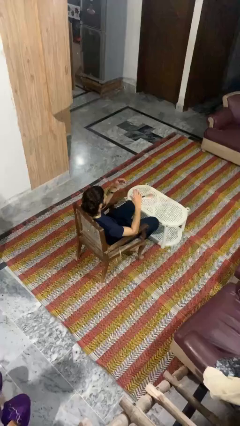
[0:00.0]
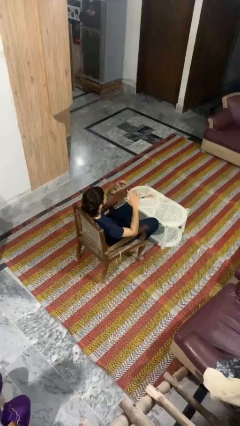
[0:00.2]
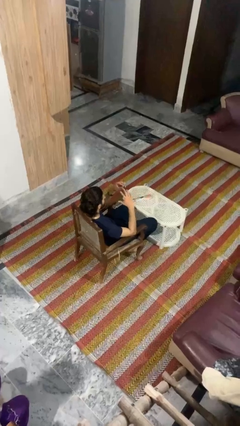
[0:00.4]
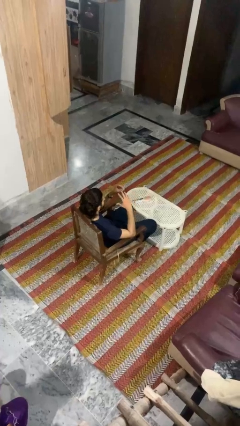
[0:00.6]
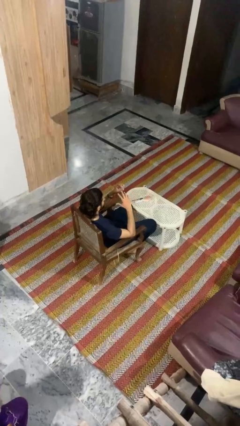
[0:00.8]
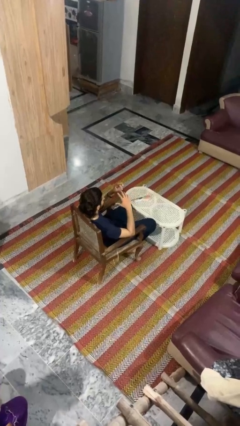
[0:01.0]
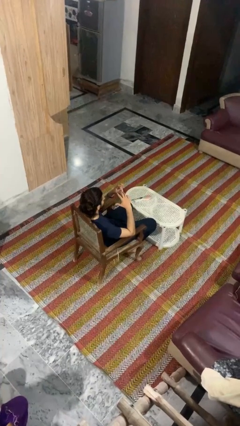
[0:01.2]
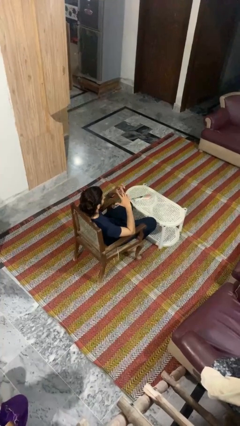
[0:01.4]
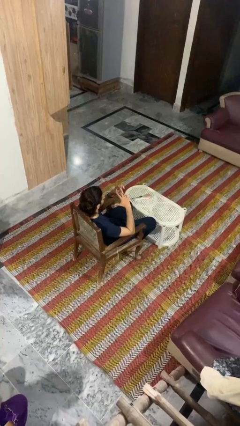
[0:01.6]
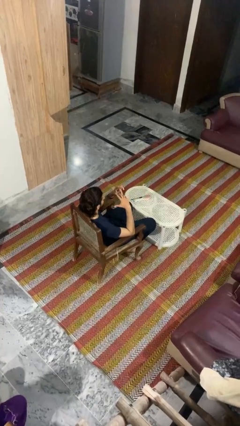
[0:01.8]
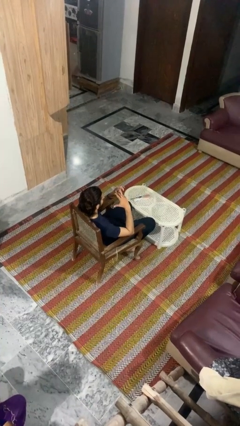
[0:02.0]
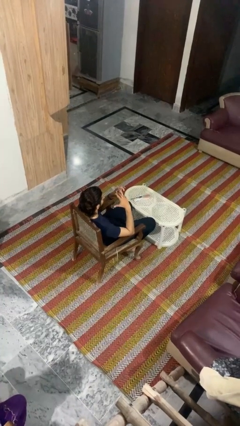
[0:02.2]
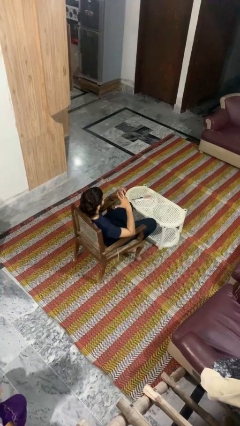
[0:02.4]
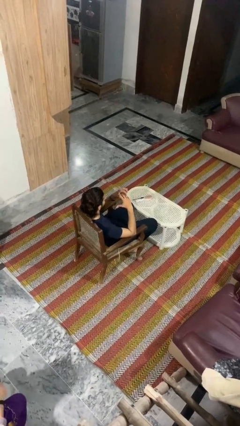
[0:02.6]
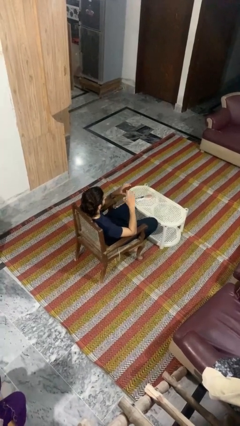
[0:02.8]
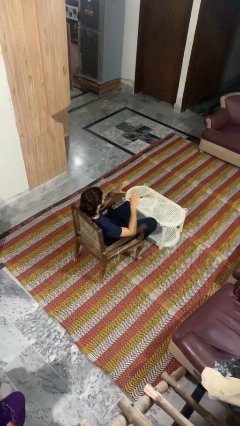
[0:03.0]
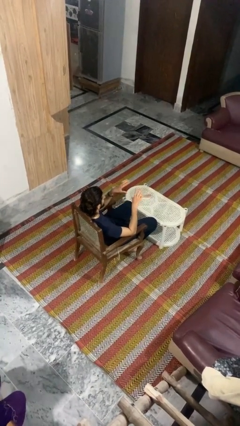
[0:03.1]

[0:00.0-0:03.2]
person puts on ring

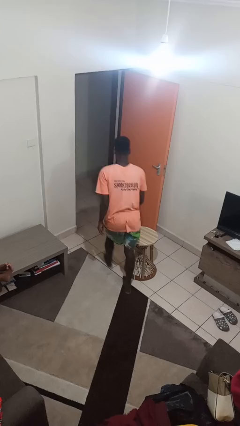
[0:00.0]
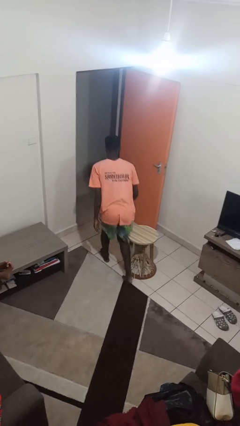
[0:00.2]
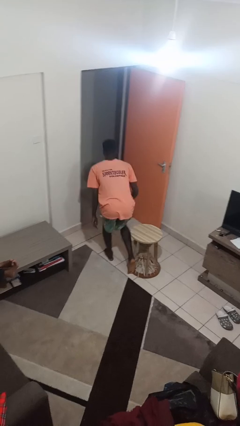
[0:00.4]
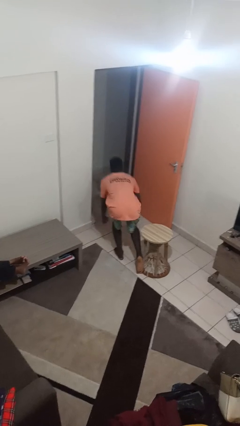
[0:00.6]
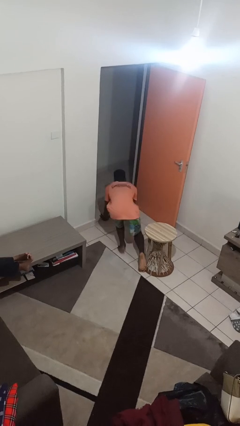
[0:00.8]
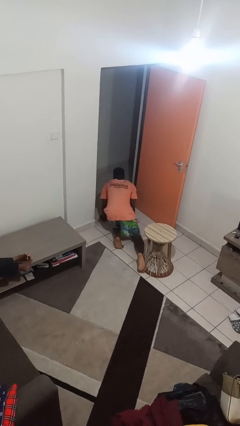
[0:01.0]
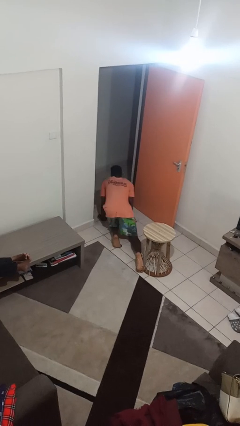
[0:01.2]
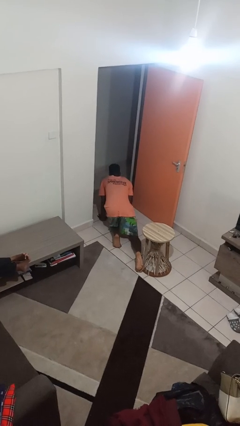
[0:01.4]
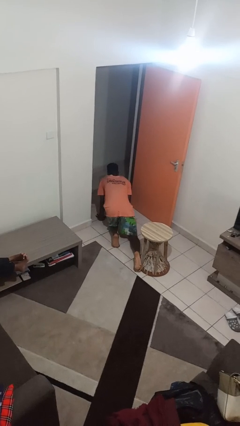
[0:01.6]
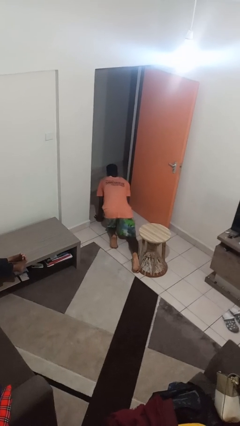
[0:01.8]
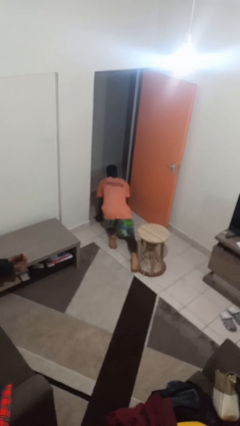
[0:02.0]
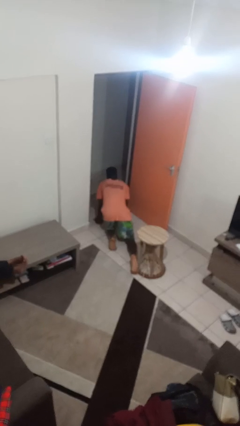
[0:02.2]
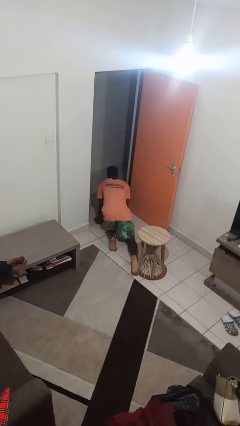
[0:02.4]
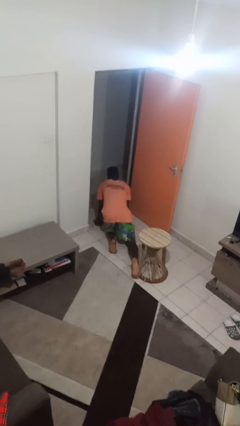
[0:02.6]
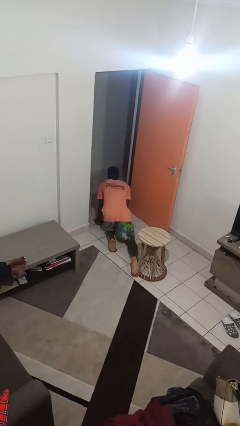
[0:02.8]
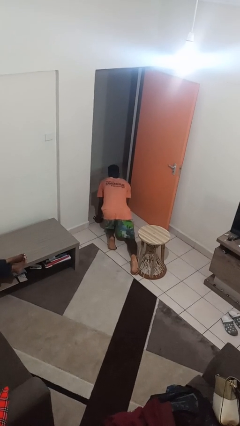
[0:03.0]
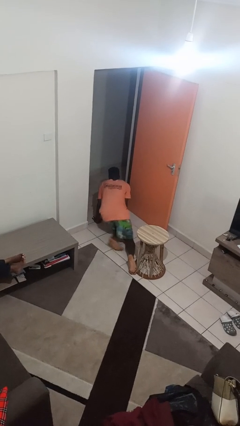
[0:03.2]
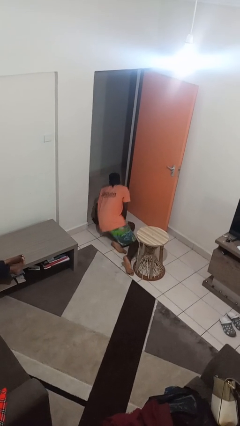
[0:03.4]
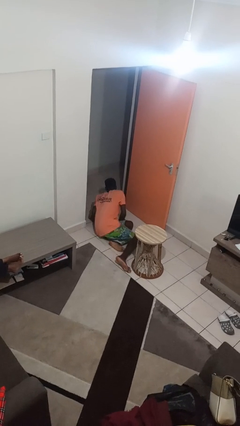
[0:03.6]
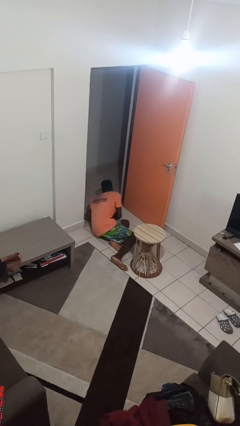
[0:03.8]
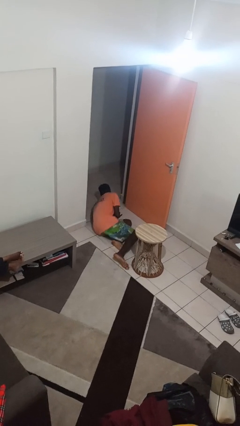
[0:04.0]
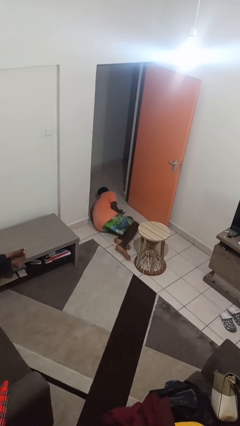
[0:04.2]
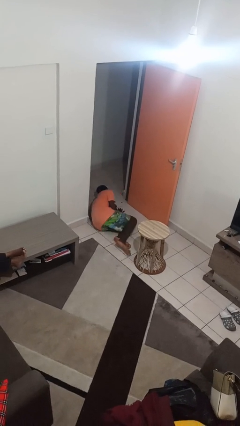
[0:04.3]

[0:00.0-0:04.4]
person trips on object on floor

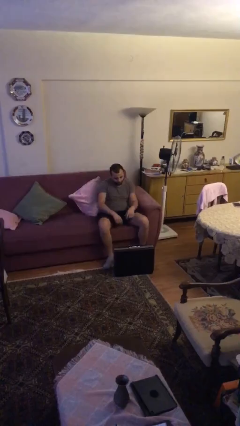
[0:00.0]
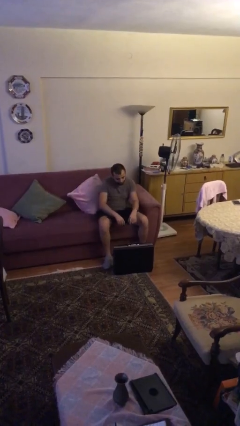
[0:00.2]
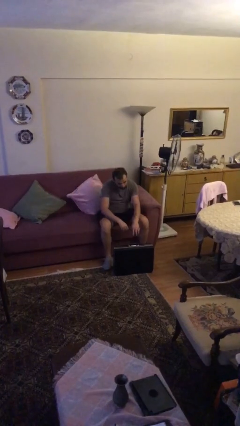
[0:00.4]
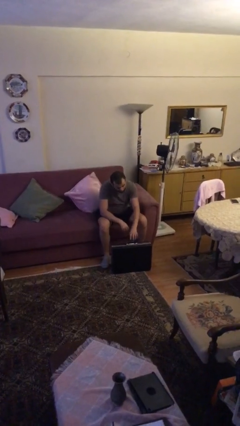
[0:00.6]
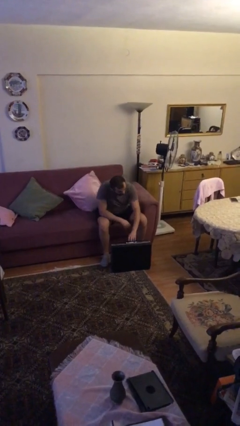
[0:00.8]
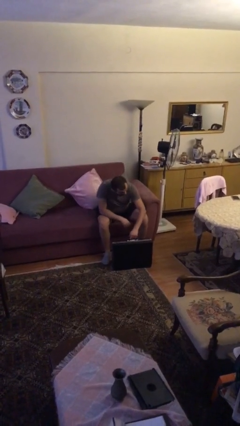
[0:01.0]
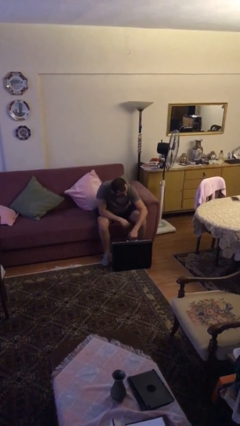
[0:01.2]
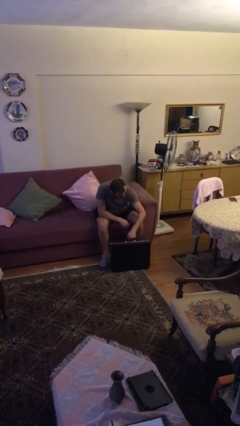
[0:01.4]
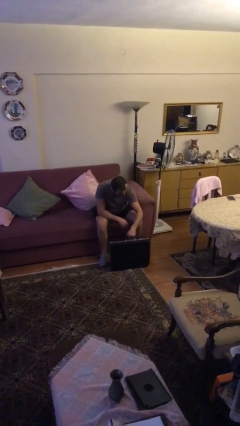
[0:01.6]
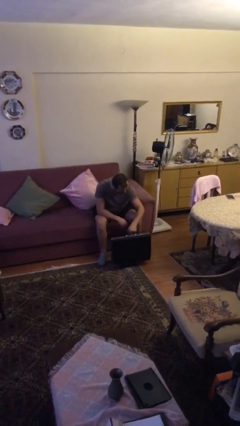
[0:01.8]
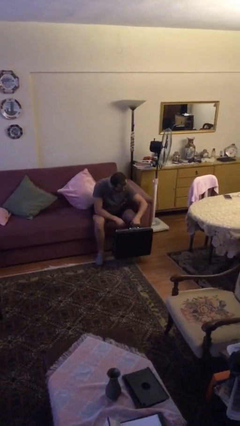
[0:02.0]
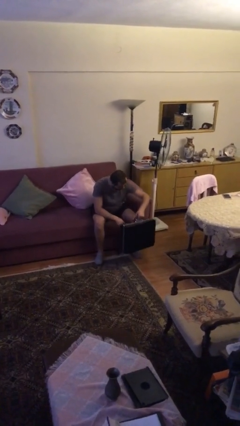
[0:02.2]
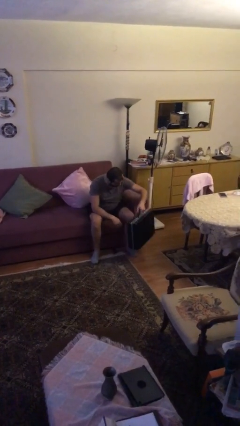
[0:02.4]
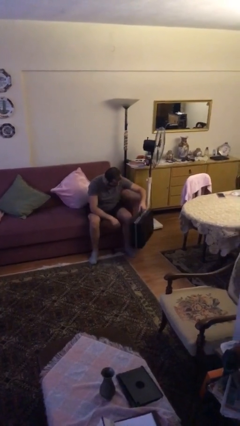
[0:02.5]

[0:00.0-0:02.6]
person picks up object from floor

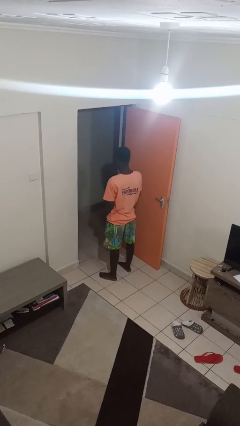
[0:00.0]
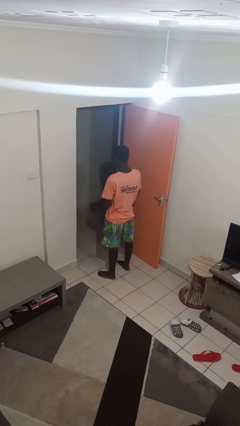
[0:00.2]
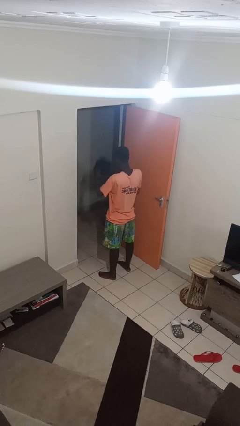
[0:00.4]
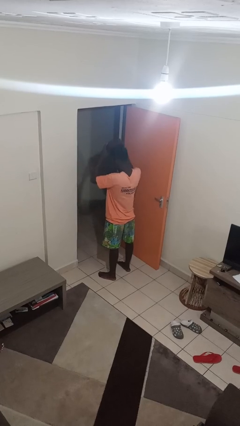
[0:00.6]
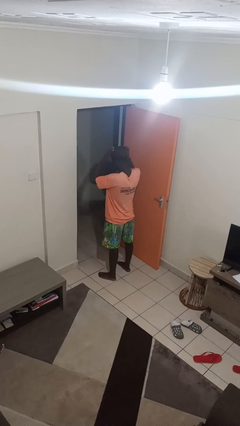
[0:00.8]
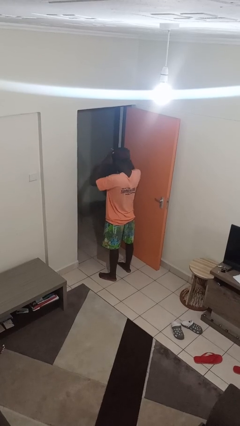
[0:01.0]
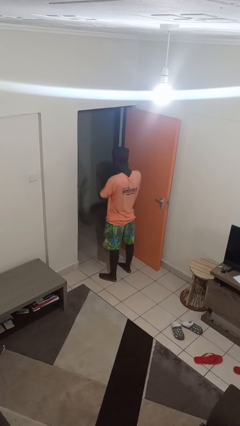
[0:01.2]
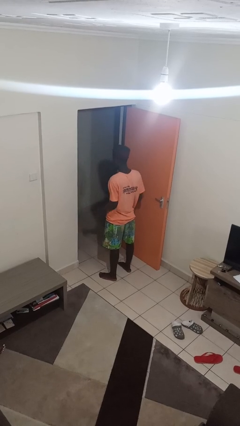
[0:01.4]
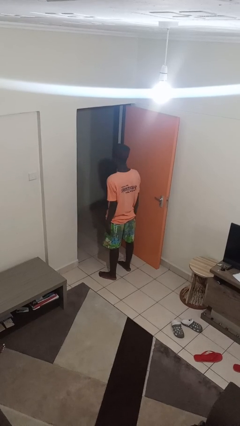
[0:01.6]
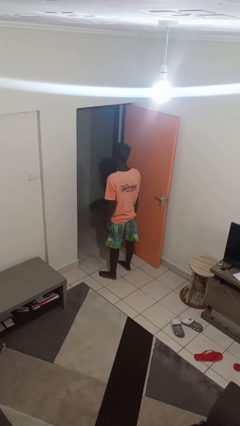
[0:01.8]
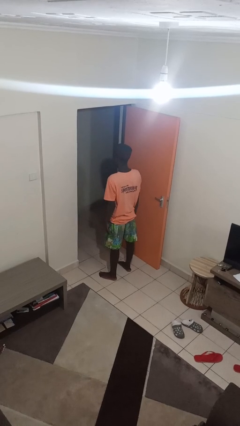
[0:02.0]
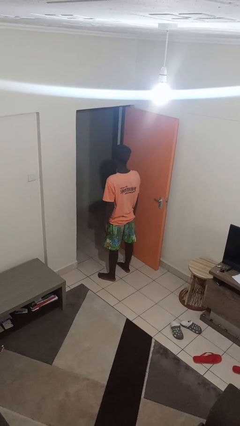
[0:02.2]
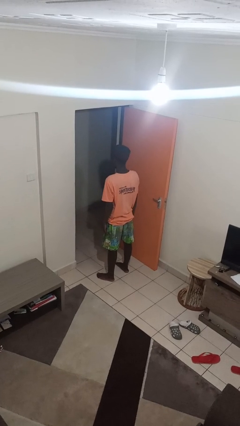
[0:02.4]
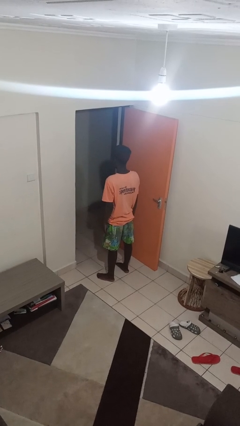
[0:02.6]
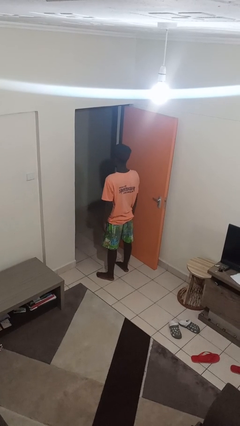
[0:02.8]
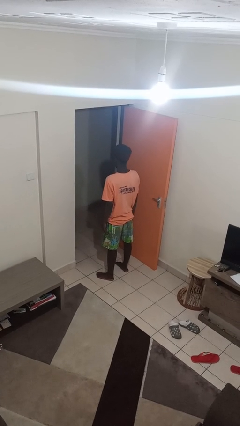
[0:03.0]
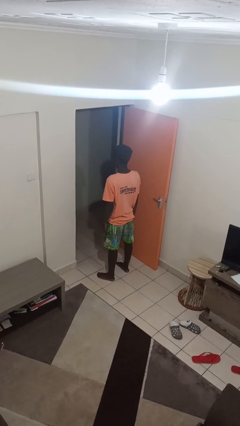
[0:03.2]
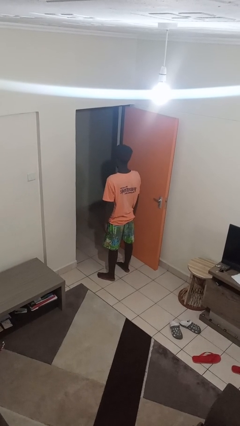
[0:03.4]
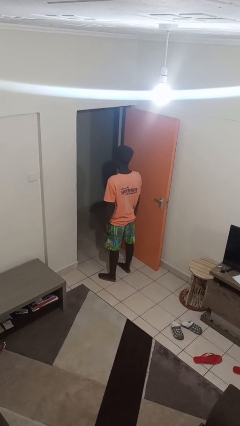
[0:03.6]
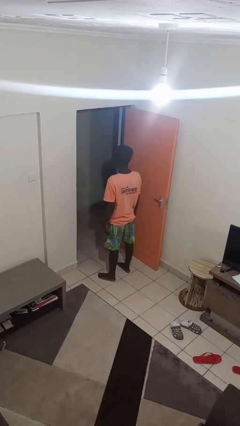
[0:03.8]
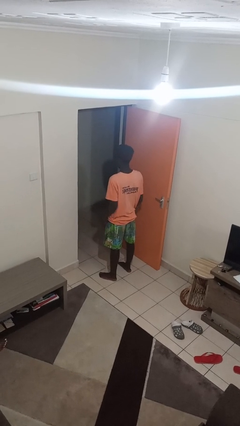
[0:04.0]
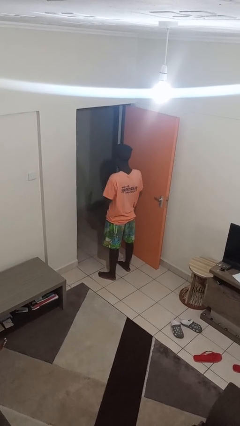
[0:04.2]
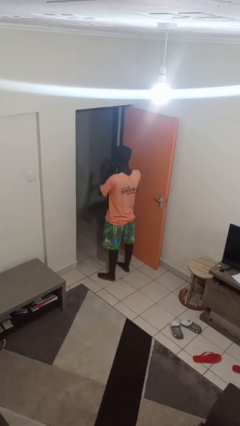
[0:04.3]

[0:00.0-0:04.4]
person puts on hat

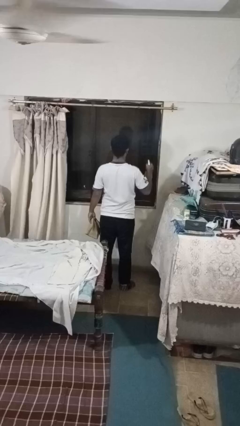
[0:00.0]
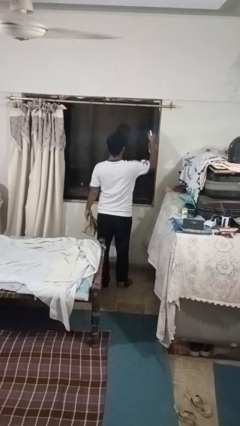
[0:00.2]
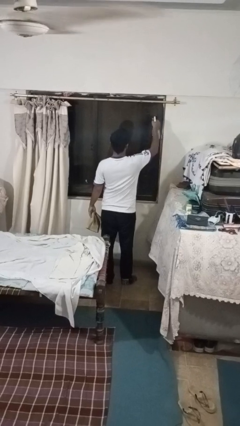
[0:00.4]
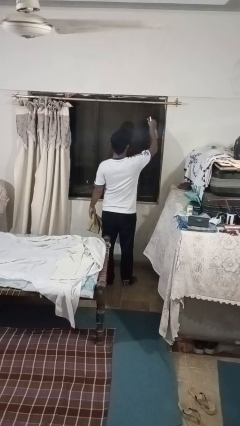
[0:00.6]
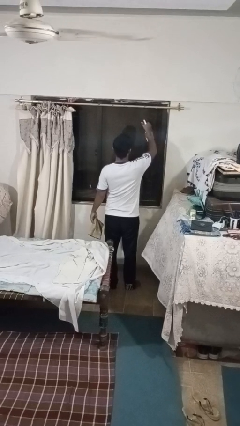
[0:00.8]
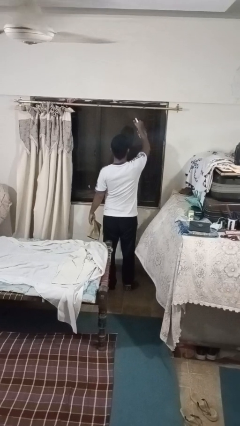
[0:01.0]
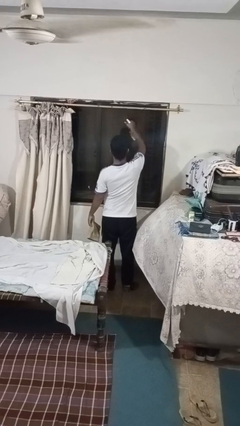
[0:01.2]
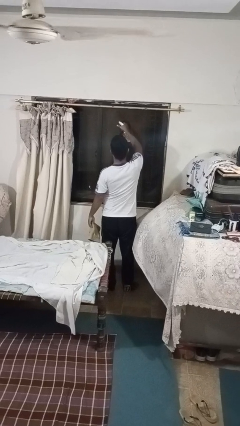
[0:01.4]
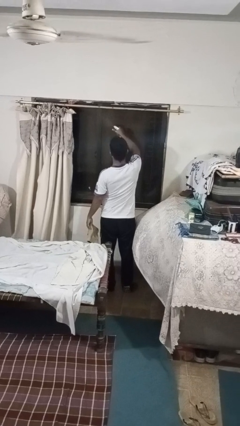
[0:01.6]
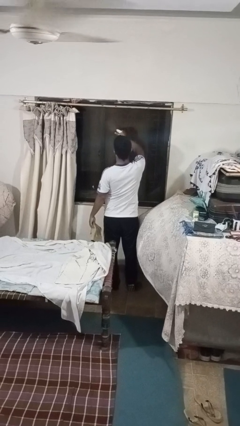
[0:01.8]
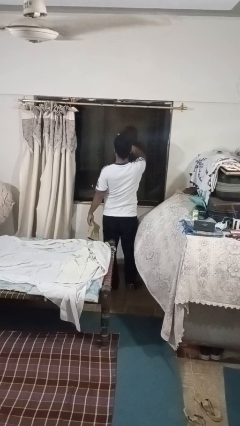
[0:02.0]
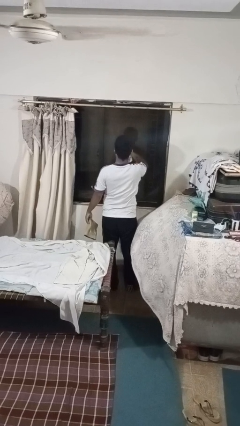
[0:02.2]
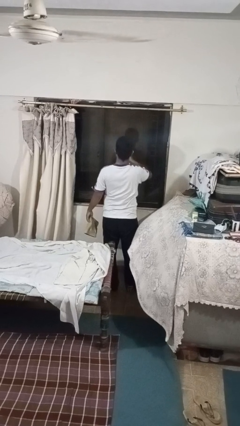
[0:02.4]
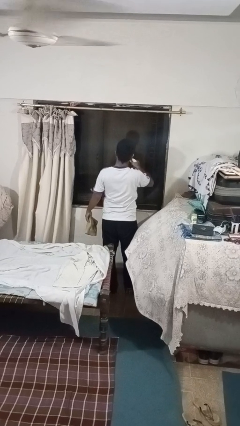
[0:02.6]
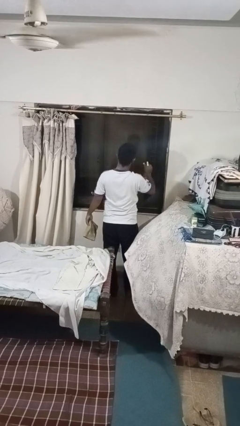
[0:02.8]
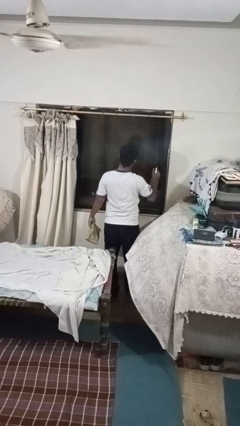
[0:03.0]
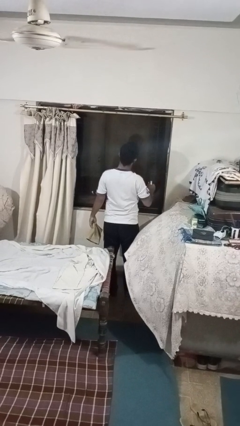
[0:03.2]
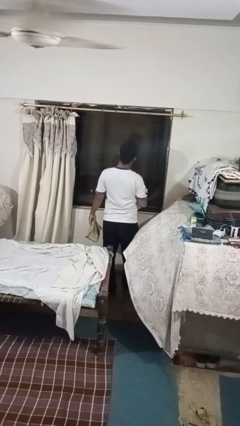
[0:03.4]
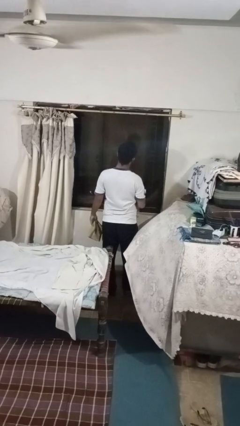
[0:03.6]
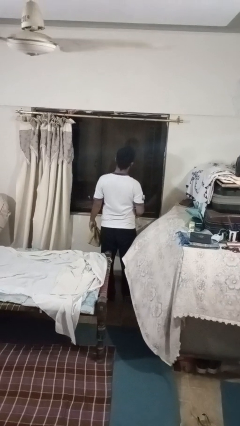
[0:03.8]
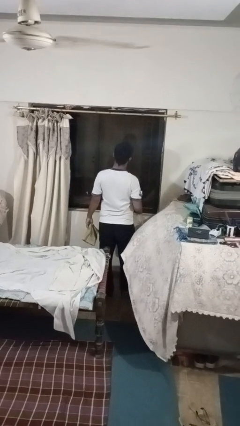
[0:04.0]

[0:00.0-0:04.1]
person sprays from bottle
